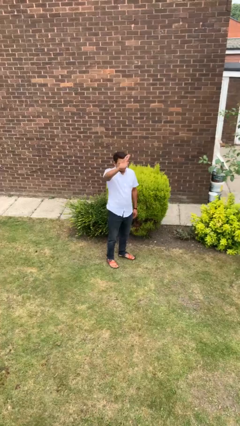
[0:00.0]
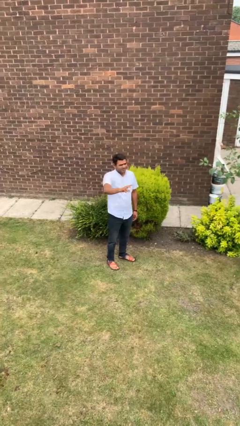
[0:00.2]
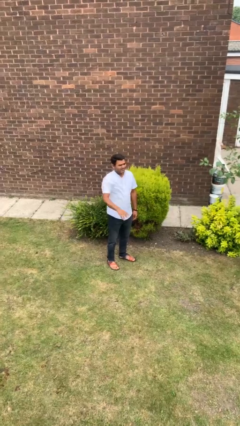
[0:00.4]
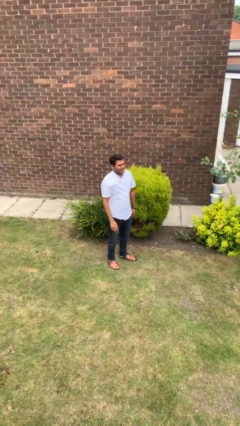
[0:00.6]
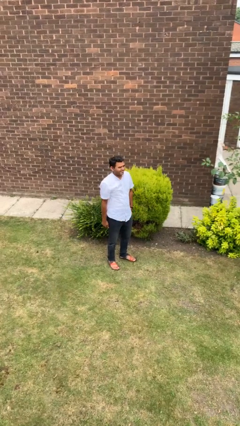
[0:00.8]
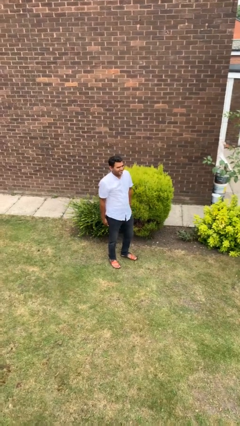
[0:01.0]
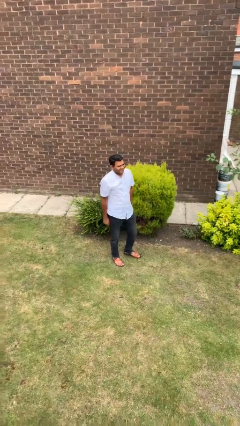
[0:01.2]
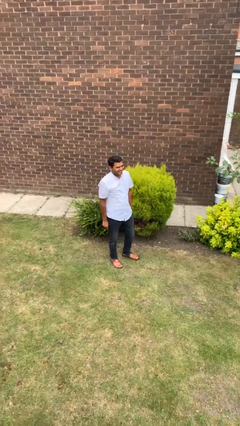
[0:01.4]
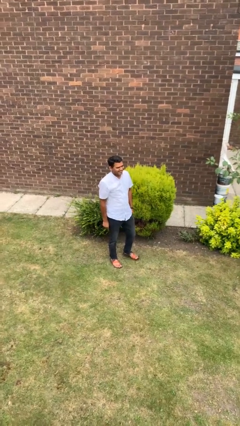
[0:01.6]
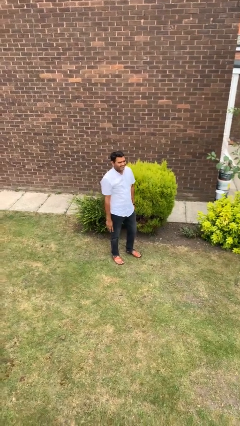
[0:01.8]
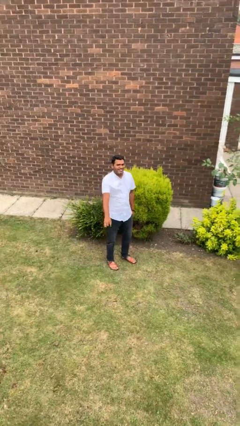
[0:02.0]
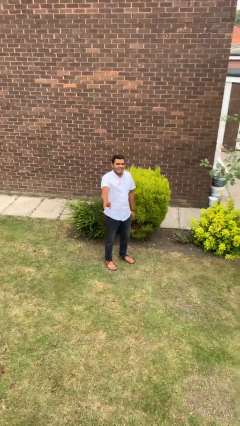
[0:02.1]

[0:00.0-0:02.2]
person gestures lower hand

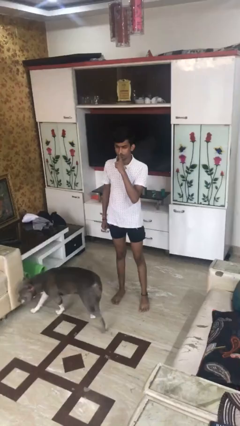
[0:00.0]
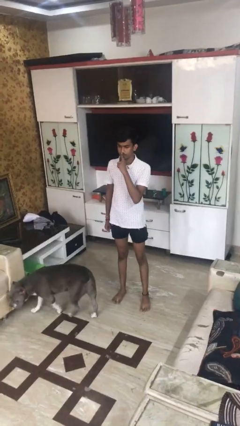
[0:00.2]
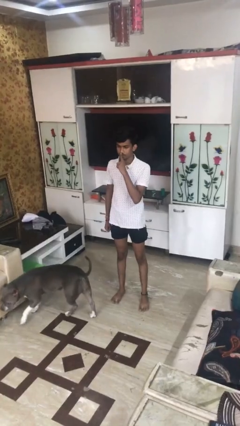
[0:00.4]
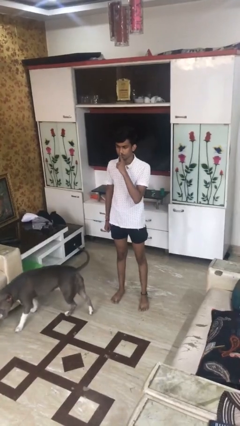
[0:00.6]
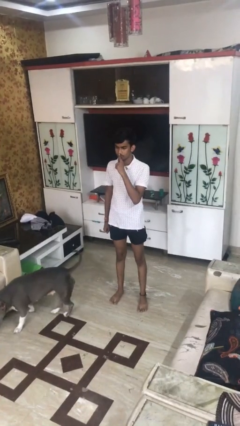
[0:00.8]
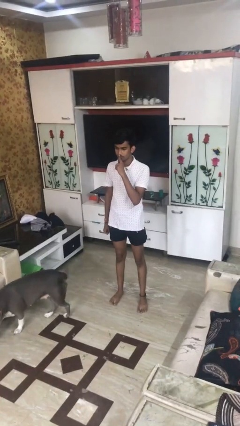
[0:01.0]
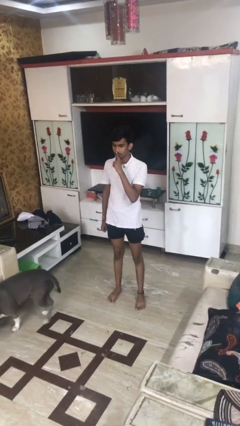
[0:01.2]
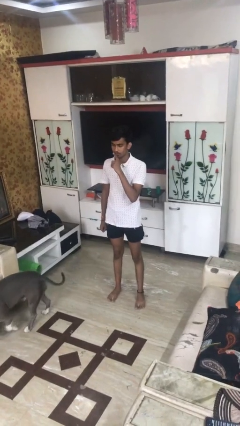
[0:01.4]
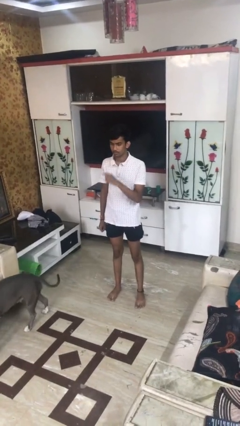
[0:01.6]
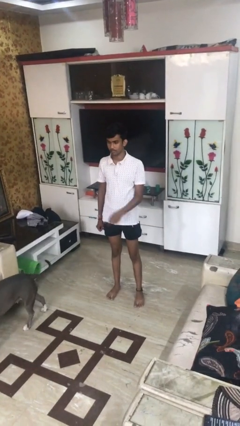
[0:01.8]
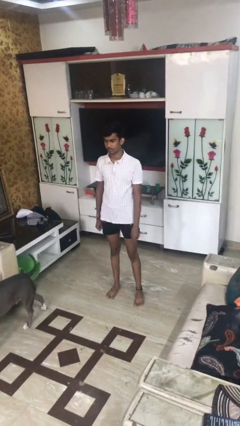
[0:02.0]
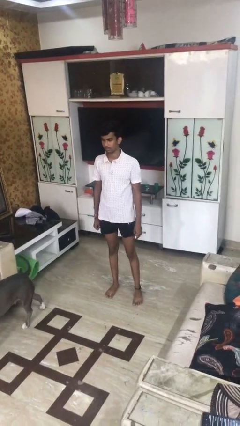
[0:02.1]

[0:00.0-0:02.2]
person gestures be quiet

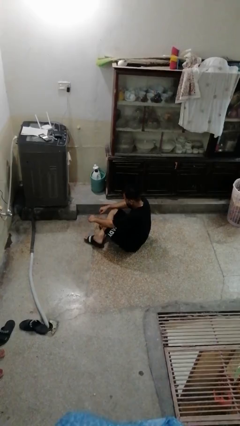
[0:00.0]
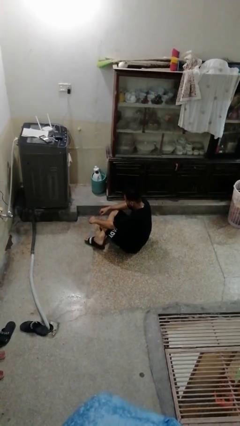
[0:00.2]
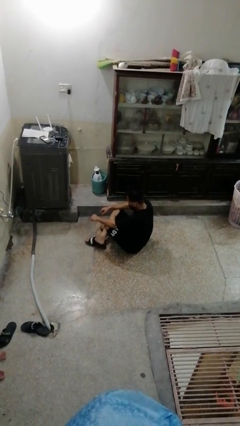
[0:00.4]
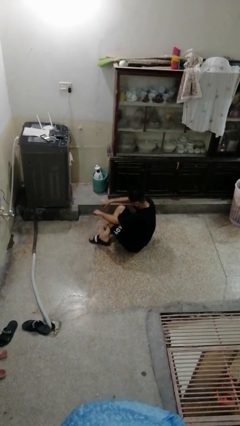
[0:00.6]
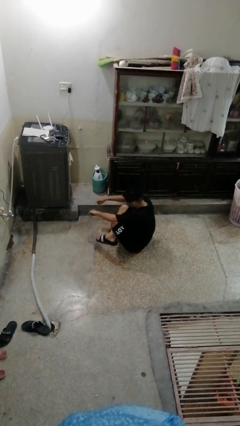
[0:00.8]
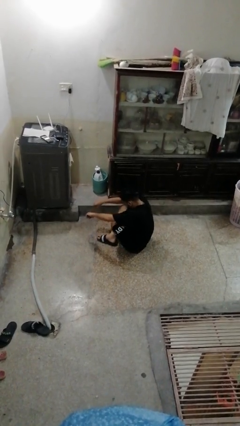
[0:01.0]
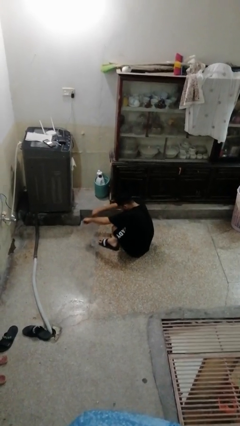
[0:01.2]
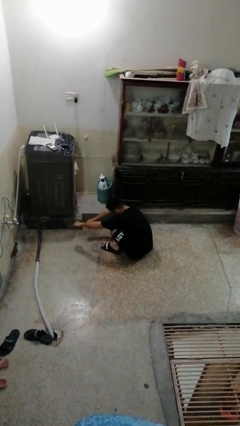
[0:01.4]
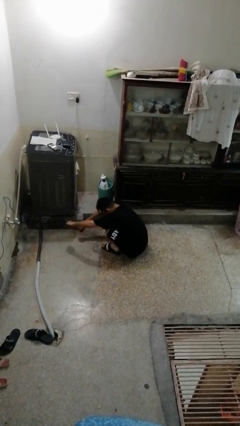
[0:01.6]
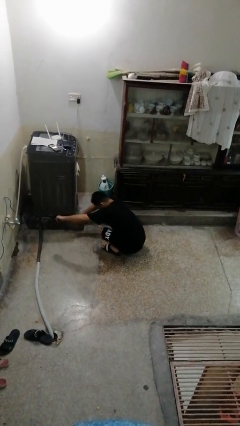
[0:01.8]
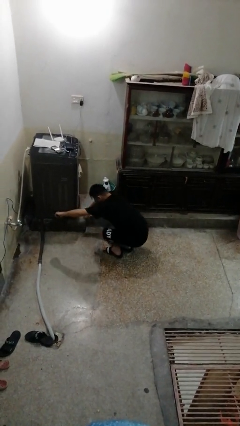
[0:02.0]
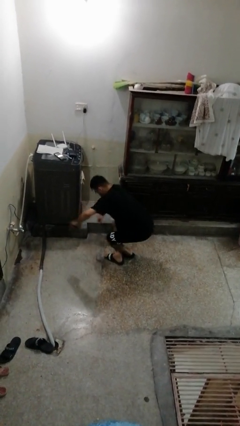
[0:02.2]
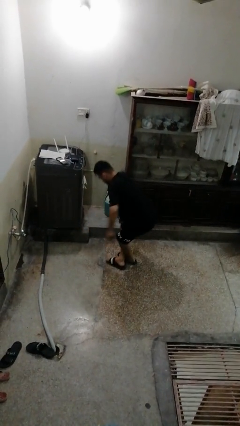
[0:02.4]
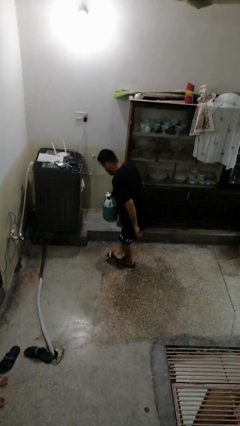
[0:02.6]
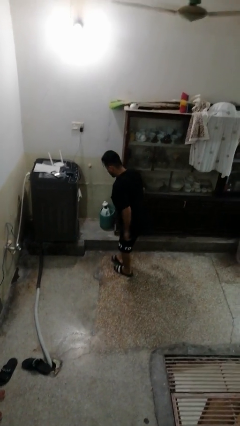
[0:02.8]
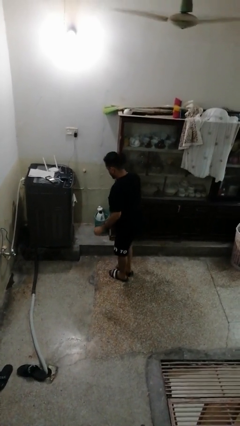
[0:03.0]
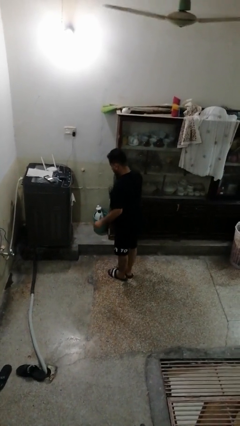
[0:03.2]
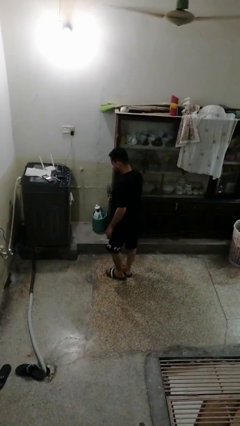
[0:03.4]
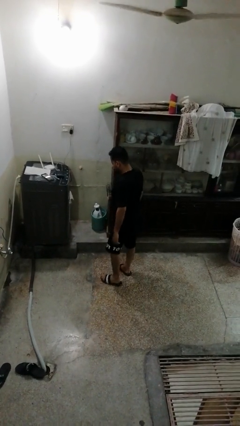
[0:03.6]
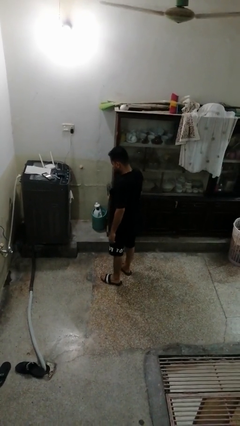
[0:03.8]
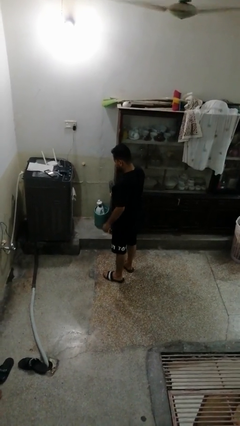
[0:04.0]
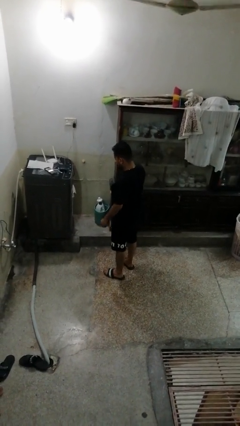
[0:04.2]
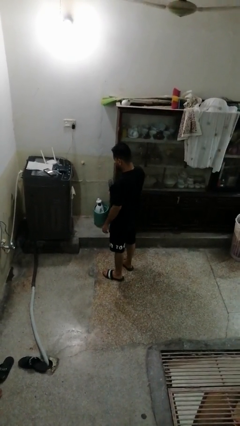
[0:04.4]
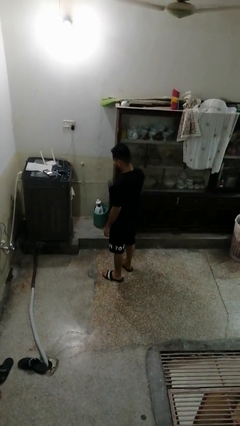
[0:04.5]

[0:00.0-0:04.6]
person stands up from floor

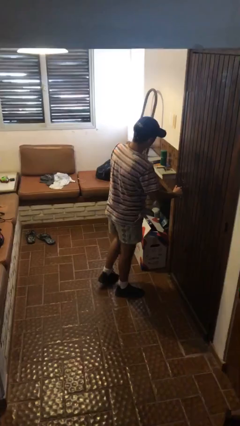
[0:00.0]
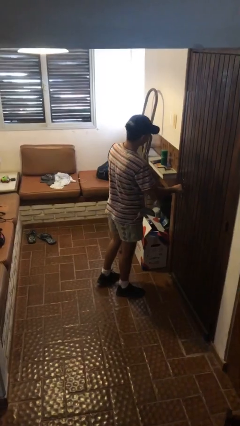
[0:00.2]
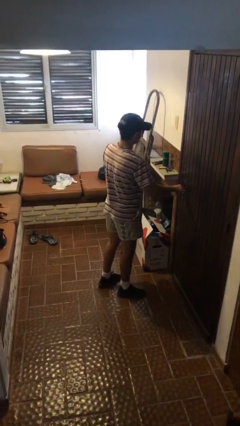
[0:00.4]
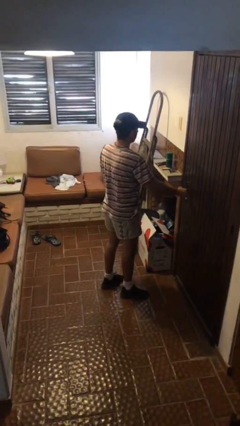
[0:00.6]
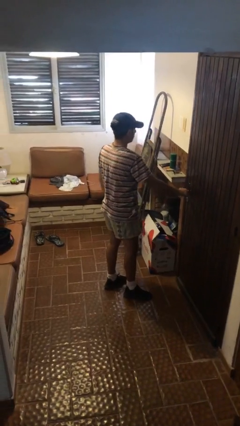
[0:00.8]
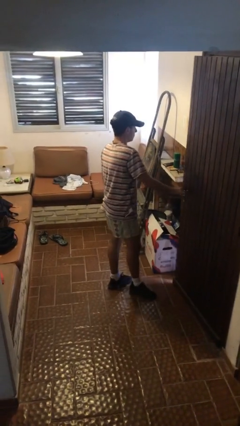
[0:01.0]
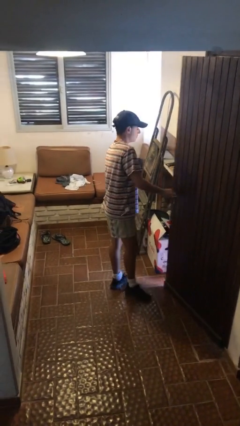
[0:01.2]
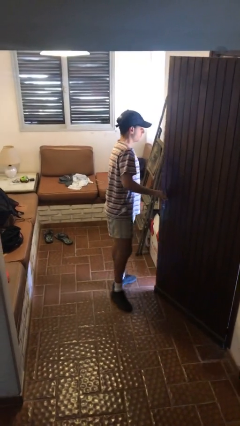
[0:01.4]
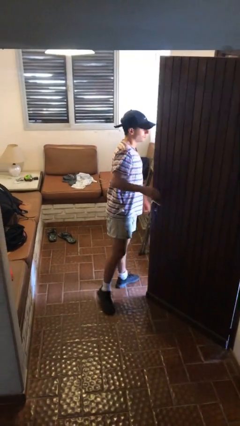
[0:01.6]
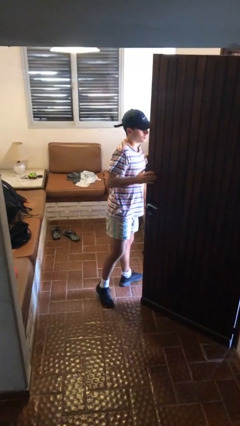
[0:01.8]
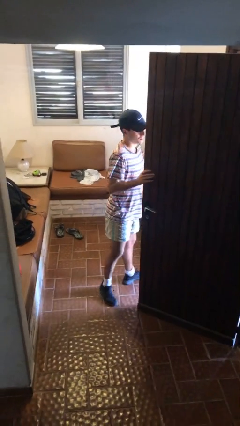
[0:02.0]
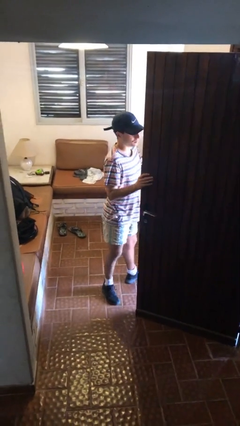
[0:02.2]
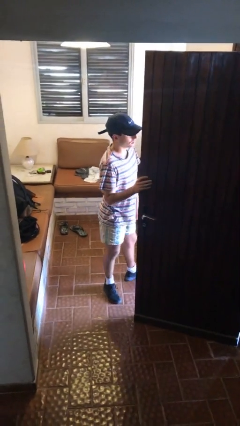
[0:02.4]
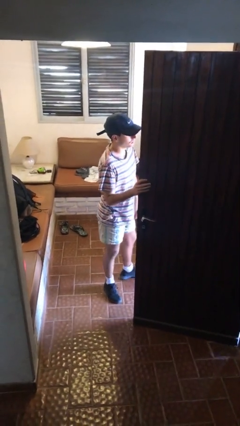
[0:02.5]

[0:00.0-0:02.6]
person opens facility door

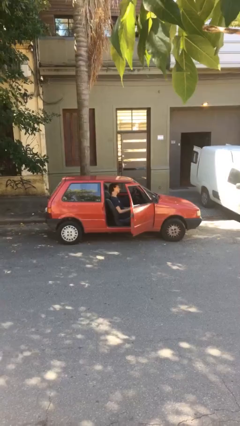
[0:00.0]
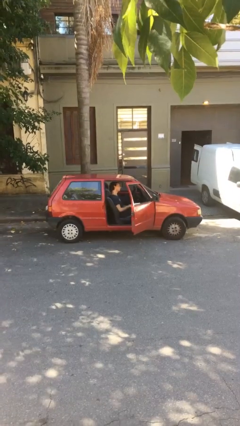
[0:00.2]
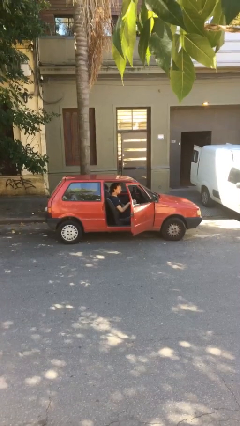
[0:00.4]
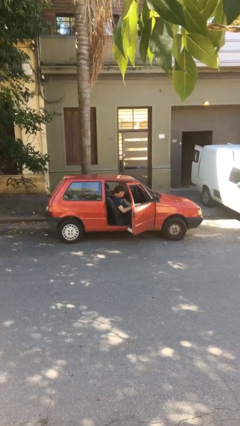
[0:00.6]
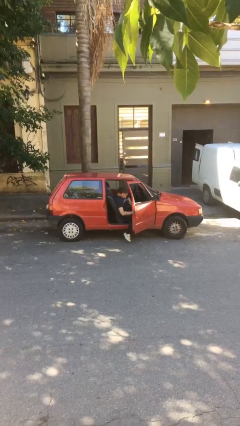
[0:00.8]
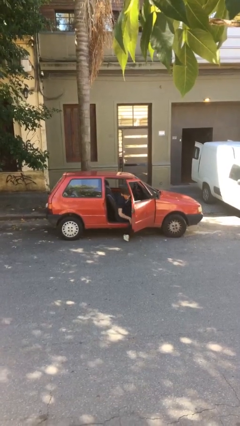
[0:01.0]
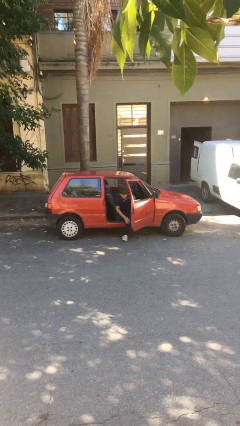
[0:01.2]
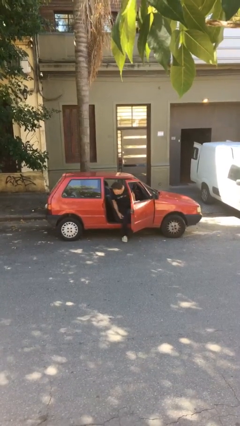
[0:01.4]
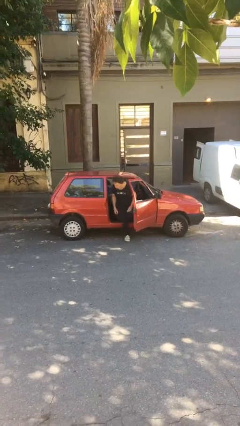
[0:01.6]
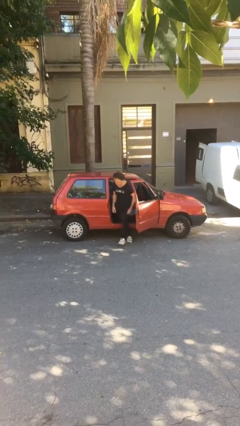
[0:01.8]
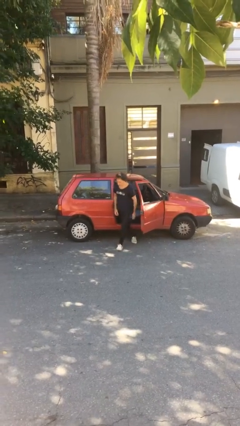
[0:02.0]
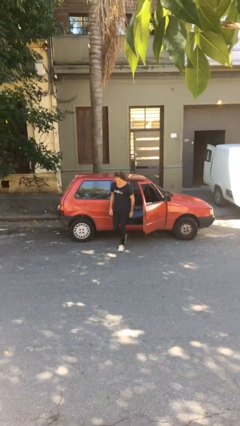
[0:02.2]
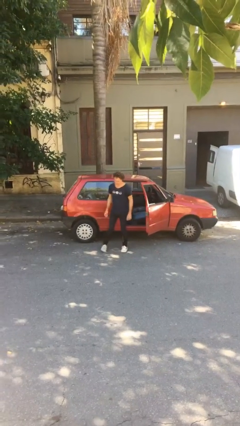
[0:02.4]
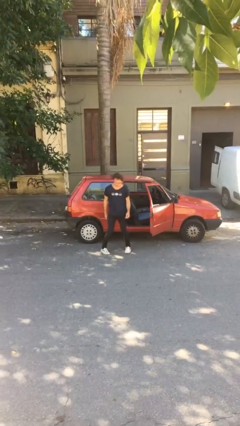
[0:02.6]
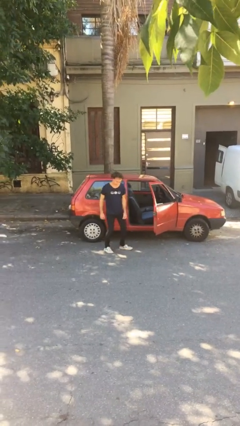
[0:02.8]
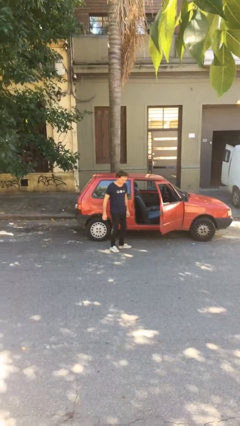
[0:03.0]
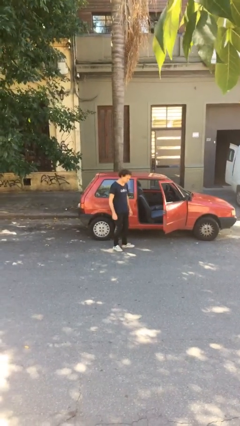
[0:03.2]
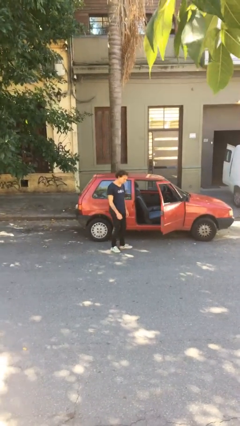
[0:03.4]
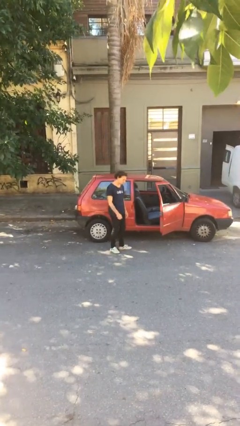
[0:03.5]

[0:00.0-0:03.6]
person exits car

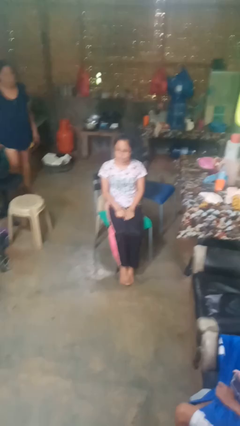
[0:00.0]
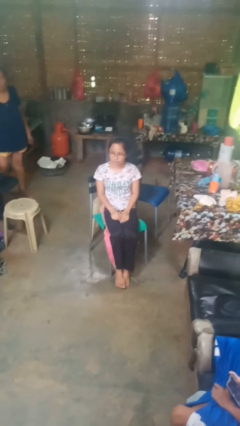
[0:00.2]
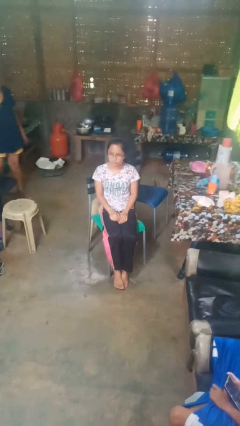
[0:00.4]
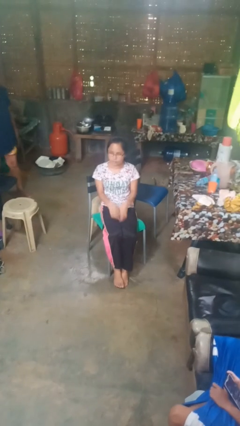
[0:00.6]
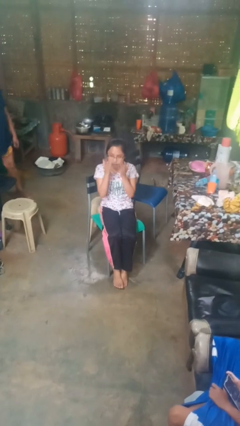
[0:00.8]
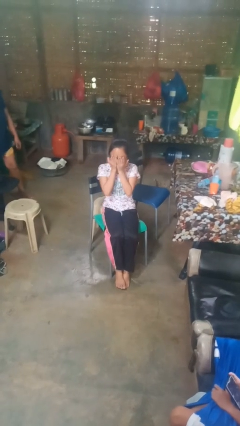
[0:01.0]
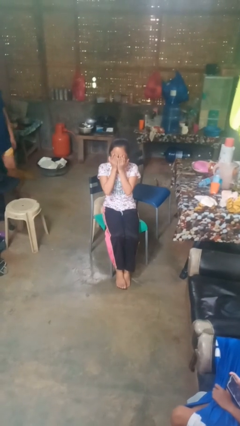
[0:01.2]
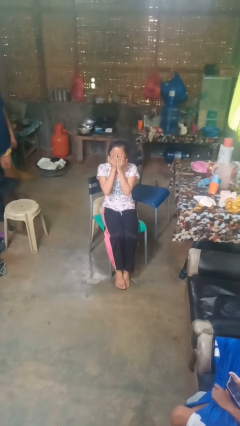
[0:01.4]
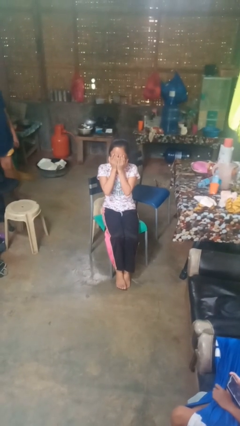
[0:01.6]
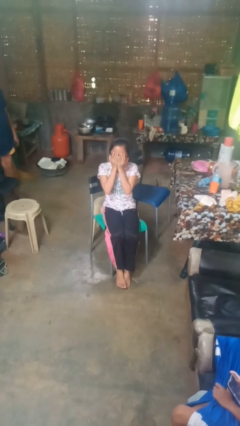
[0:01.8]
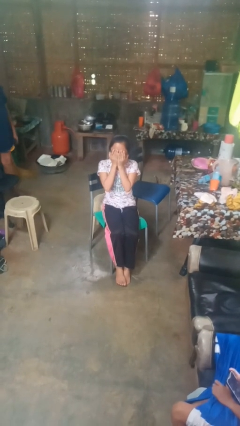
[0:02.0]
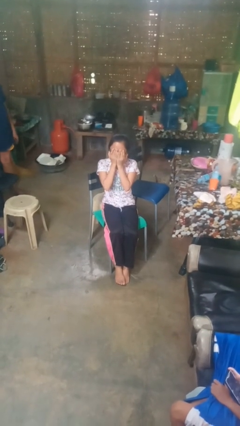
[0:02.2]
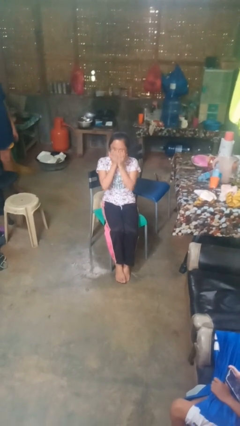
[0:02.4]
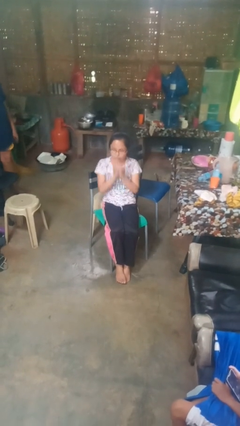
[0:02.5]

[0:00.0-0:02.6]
person covers face with hands
